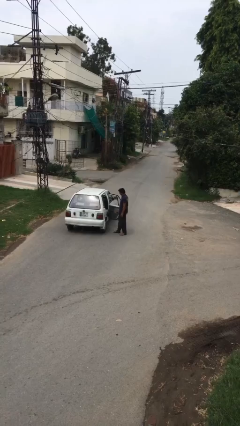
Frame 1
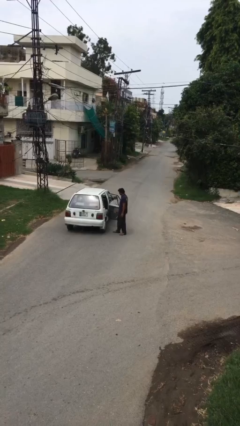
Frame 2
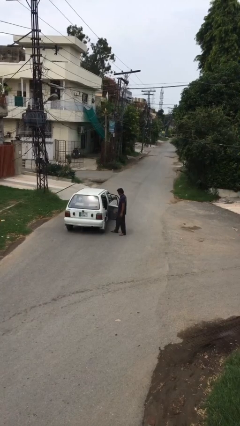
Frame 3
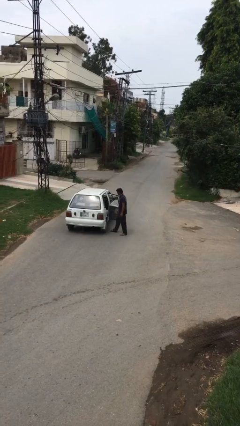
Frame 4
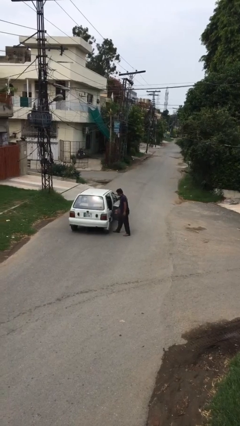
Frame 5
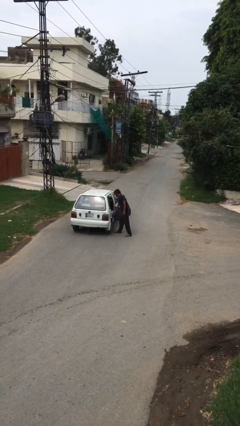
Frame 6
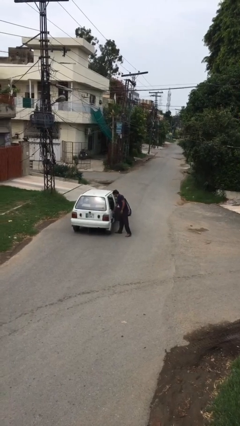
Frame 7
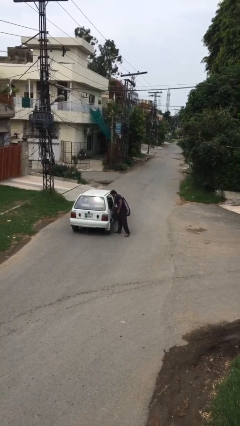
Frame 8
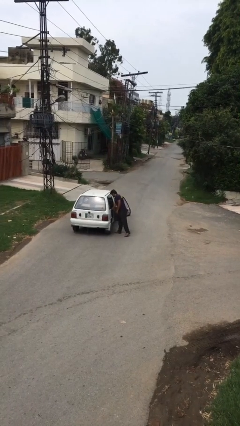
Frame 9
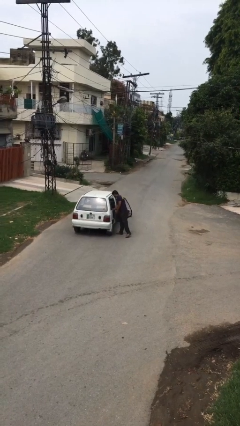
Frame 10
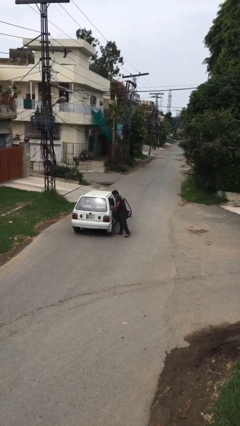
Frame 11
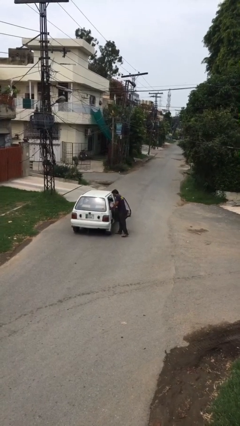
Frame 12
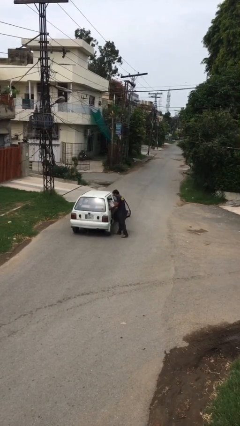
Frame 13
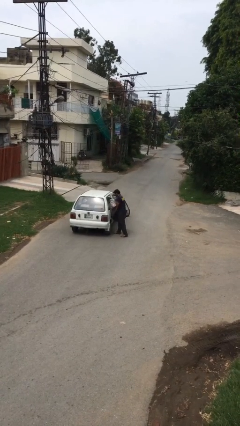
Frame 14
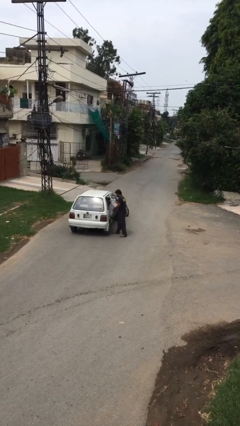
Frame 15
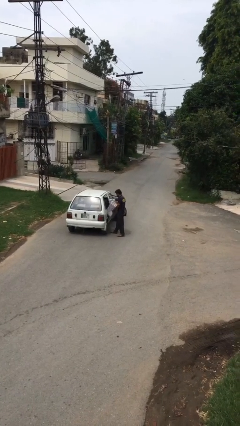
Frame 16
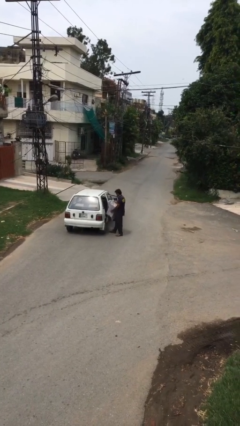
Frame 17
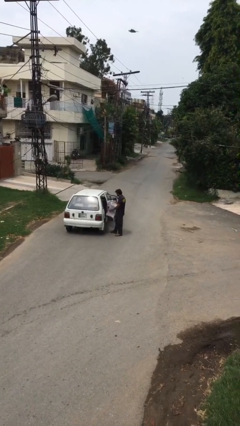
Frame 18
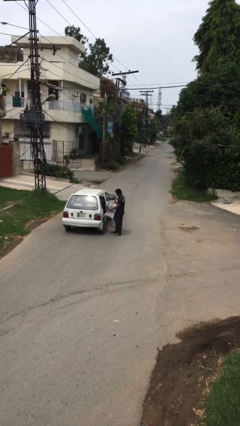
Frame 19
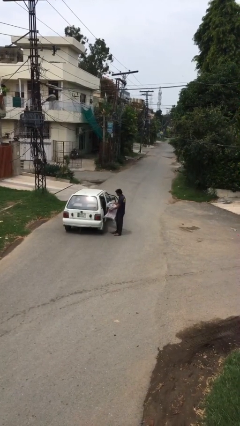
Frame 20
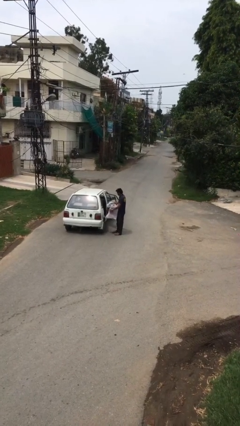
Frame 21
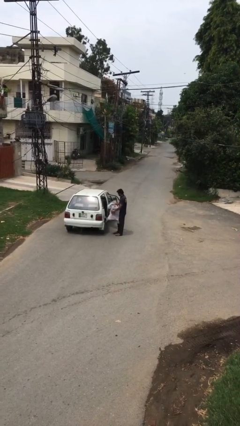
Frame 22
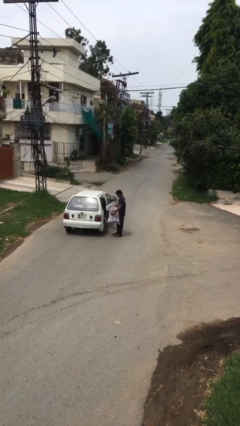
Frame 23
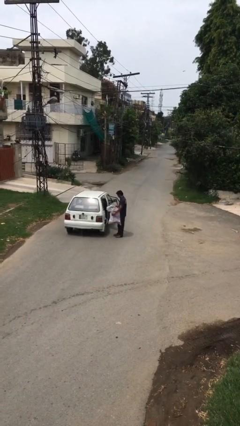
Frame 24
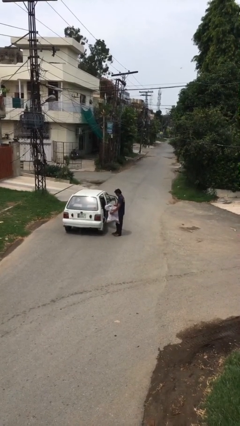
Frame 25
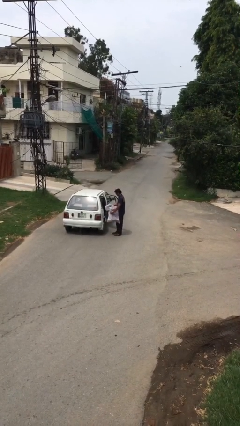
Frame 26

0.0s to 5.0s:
person unloads car

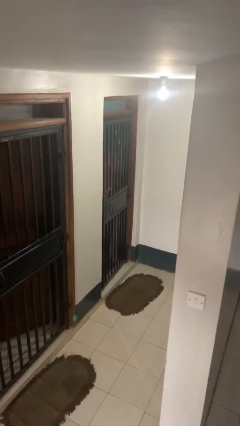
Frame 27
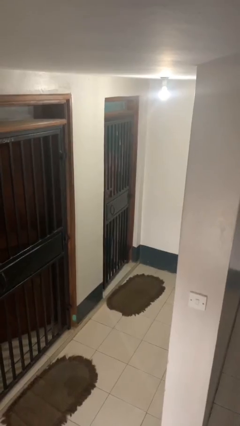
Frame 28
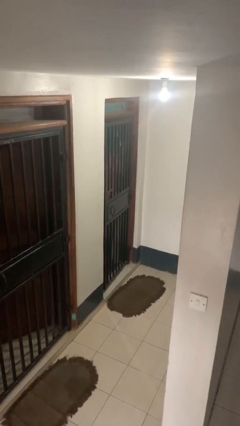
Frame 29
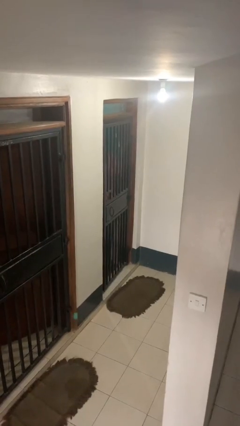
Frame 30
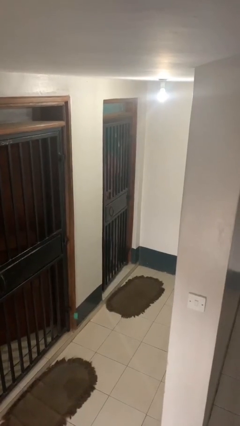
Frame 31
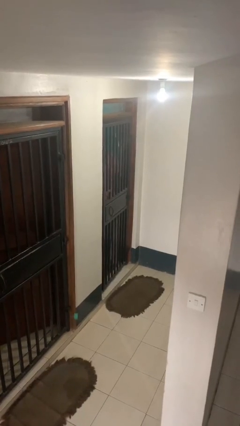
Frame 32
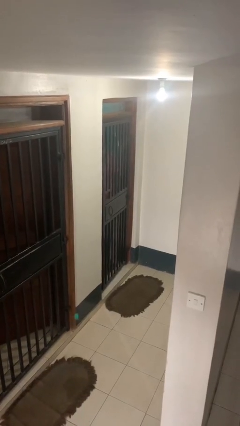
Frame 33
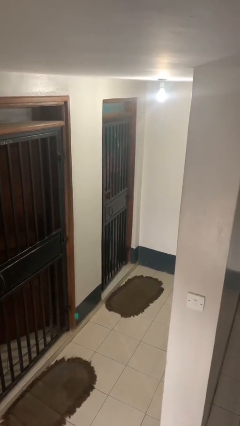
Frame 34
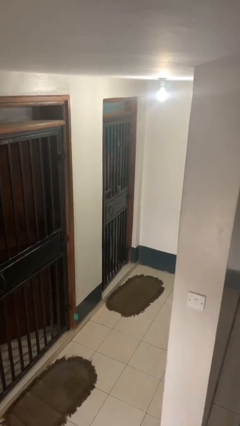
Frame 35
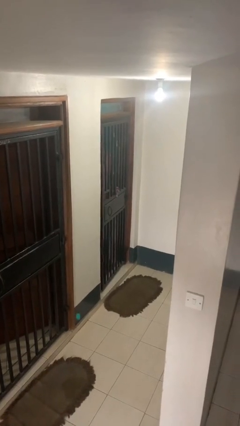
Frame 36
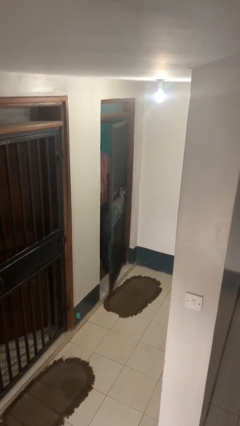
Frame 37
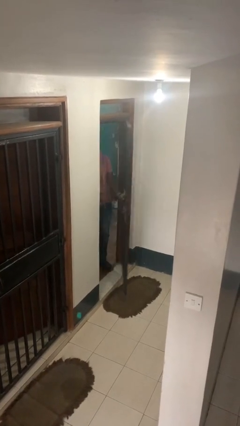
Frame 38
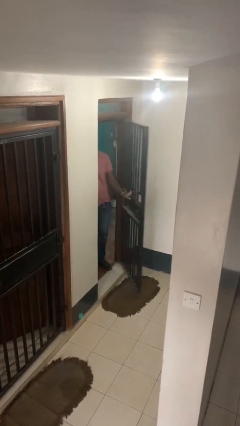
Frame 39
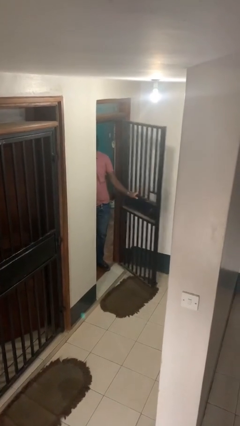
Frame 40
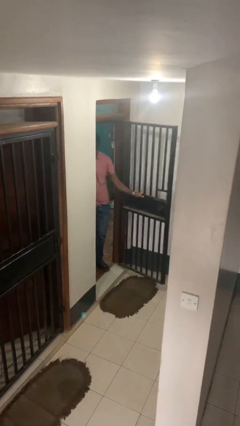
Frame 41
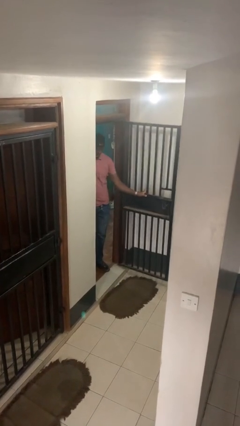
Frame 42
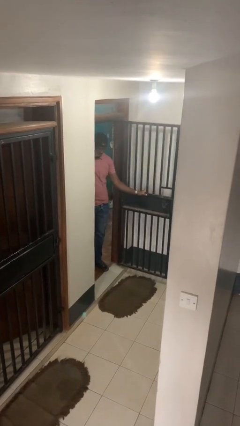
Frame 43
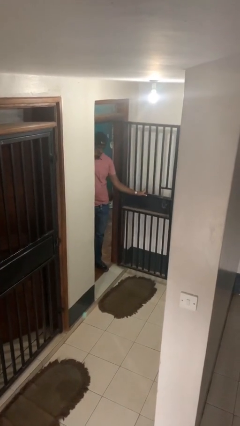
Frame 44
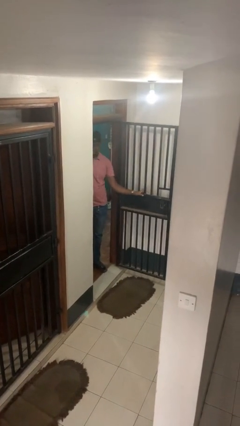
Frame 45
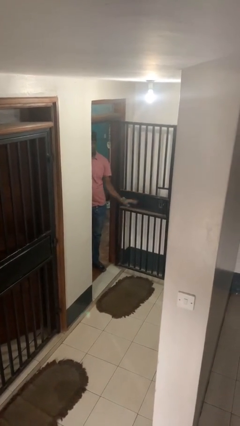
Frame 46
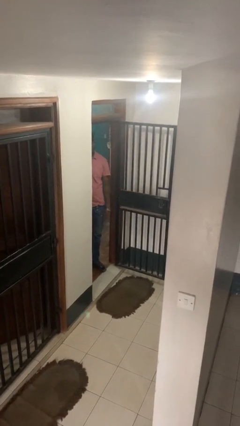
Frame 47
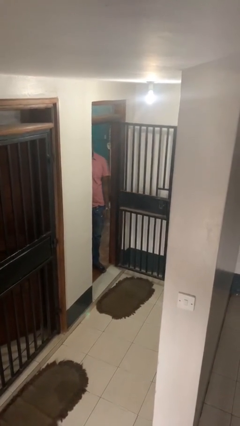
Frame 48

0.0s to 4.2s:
person opens facility door

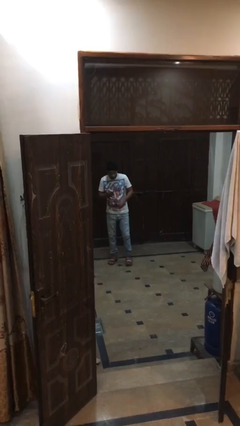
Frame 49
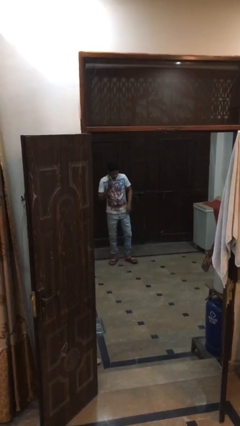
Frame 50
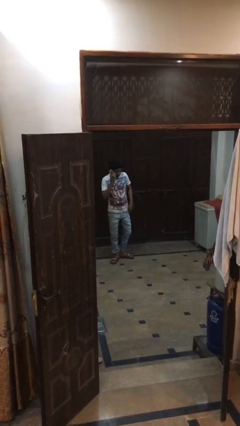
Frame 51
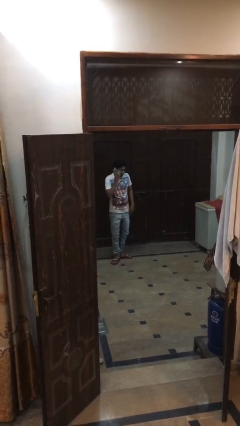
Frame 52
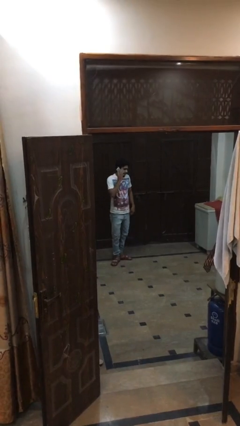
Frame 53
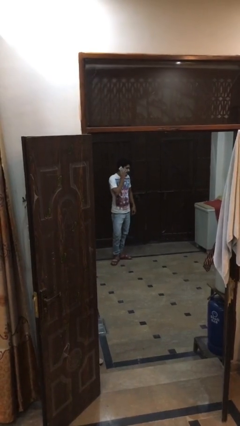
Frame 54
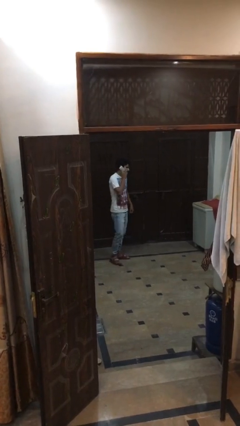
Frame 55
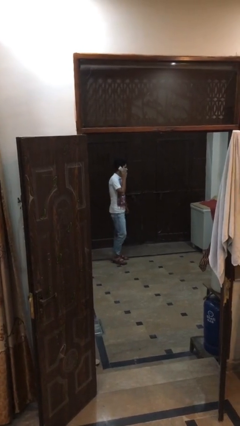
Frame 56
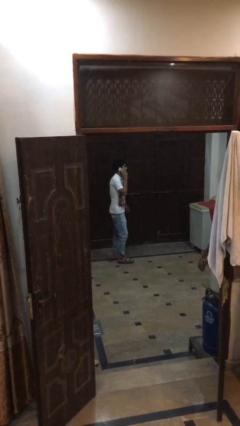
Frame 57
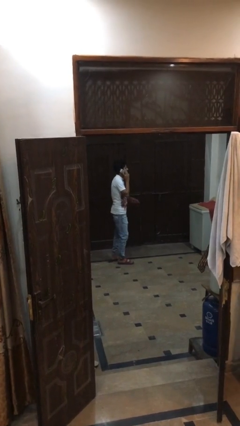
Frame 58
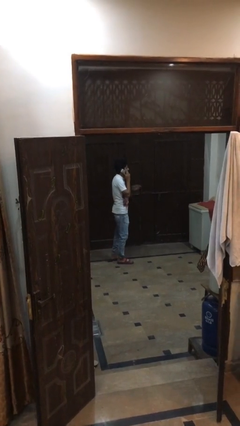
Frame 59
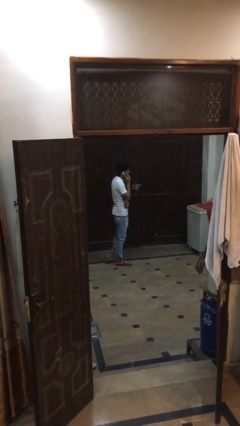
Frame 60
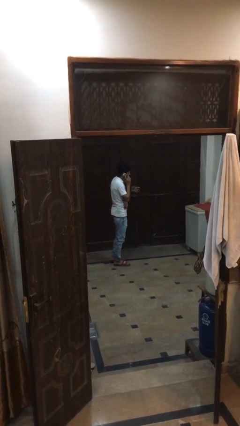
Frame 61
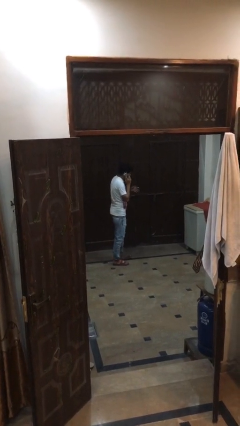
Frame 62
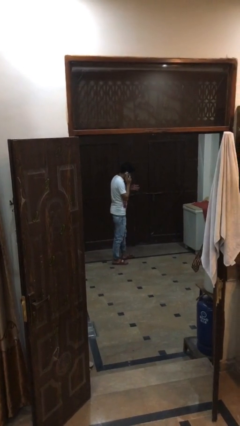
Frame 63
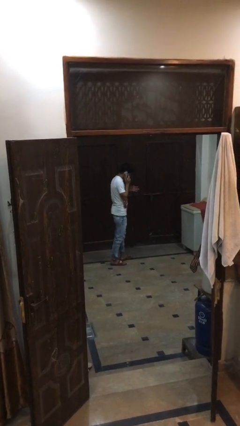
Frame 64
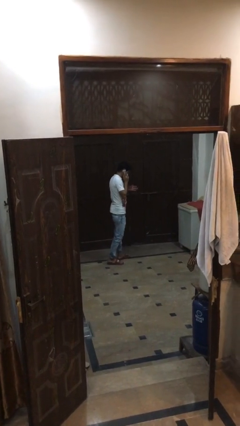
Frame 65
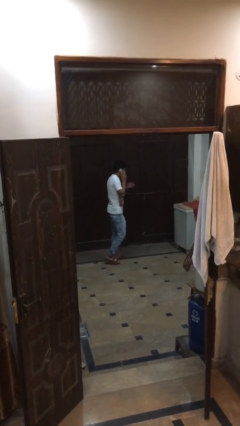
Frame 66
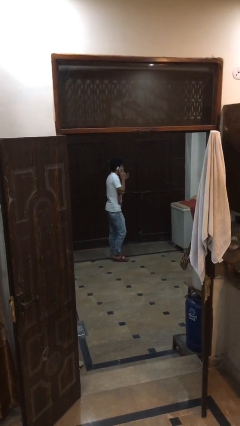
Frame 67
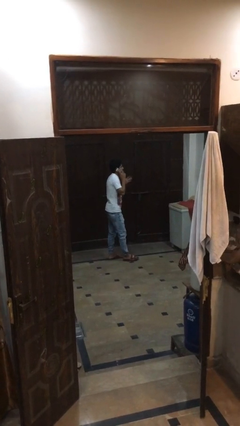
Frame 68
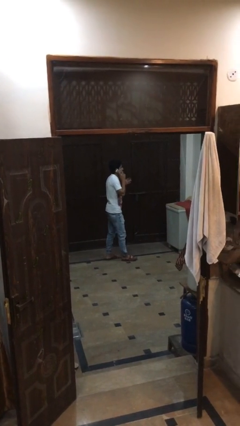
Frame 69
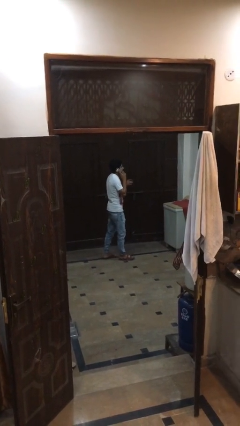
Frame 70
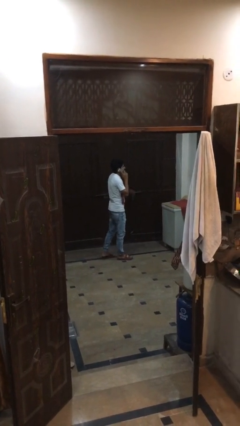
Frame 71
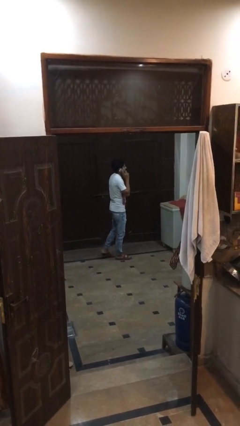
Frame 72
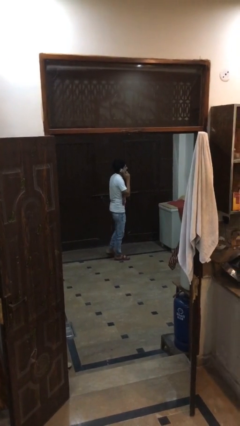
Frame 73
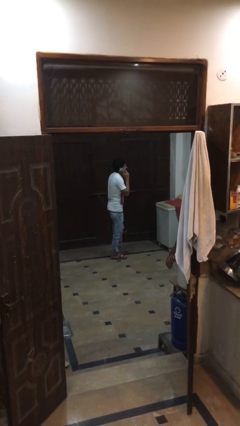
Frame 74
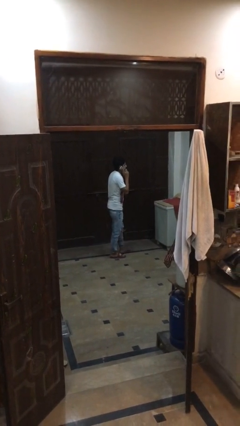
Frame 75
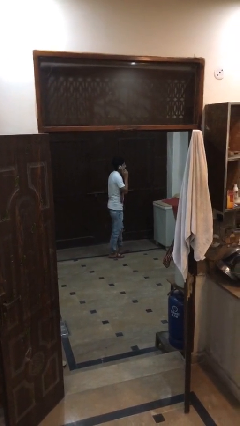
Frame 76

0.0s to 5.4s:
person talks on phone

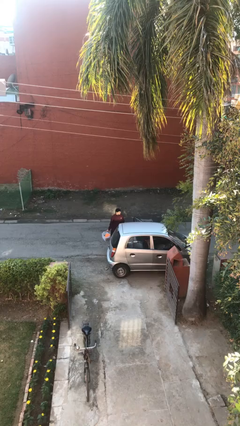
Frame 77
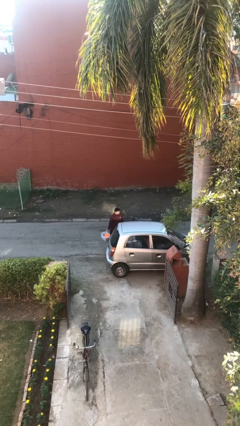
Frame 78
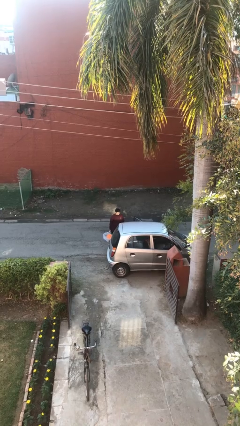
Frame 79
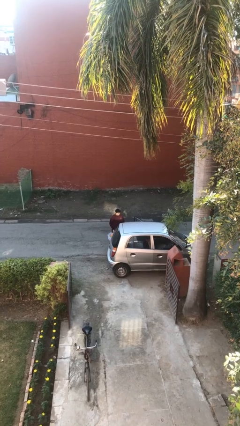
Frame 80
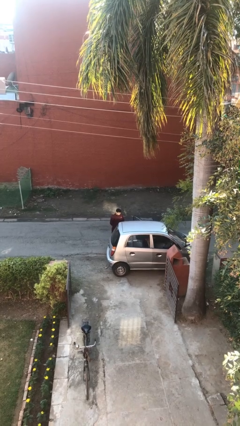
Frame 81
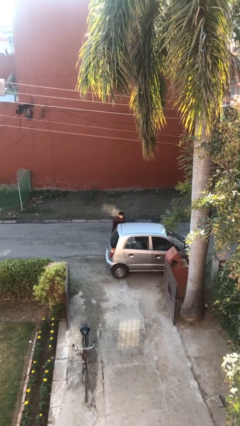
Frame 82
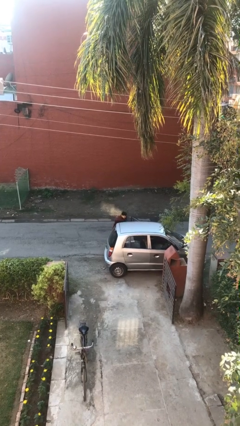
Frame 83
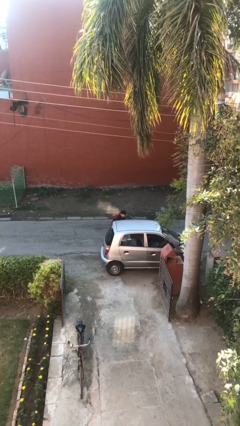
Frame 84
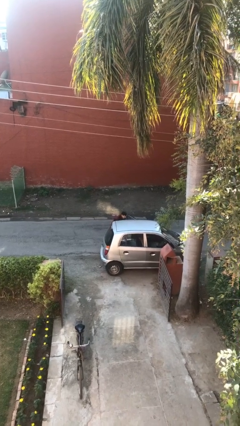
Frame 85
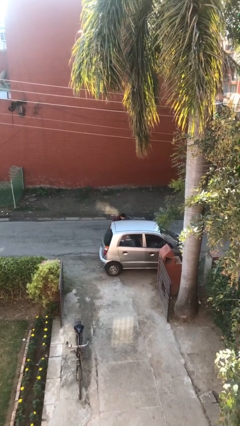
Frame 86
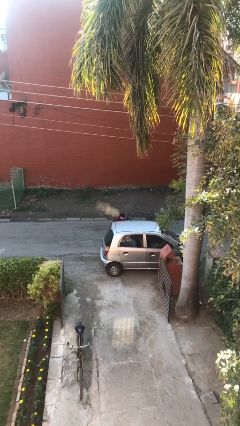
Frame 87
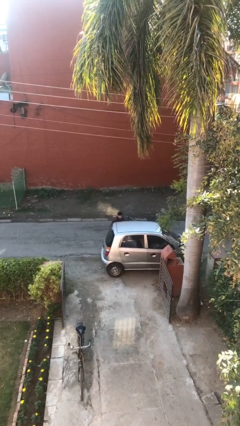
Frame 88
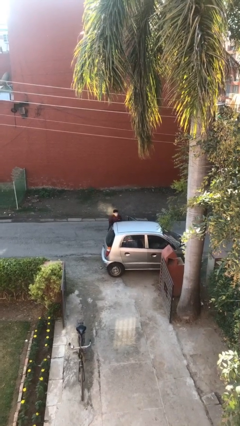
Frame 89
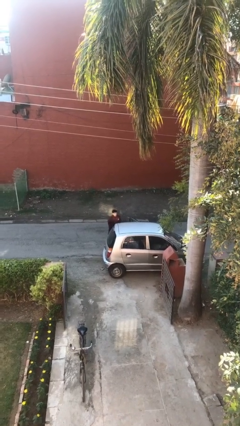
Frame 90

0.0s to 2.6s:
person loads car

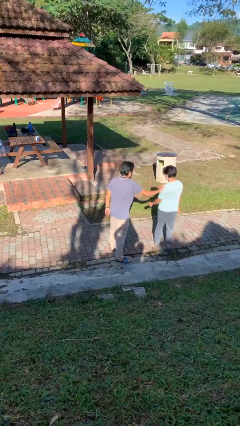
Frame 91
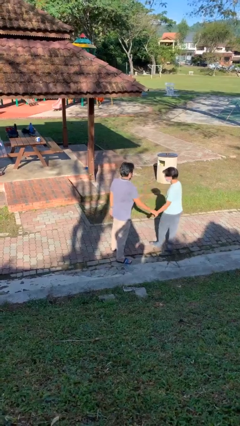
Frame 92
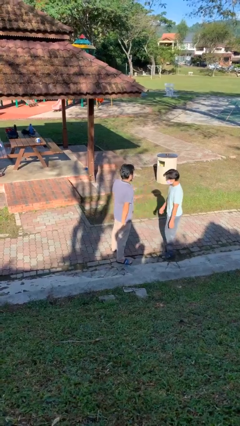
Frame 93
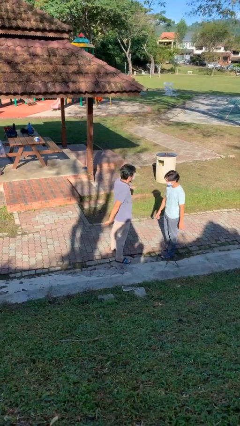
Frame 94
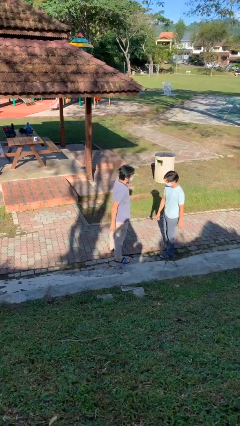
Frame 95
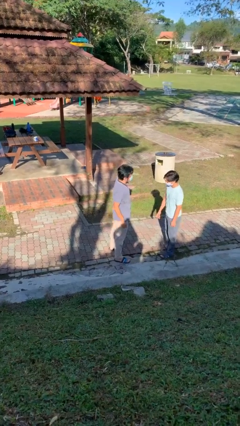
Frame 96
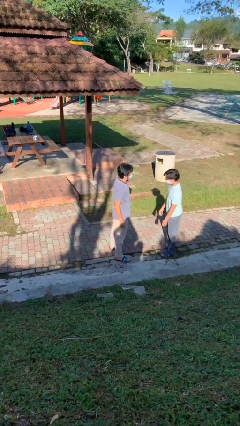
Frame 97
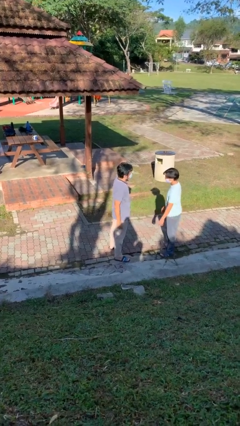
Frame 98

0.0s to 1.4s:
person spins person around
